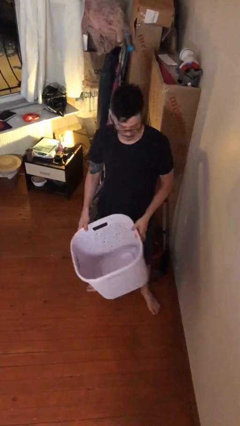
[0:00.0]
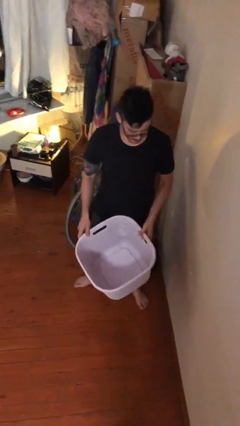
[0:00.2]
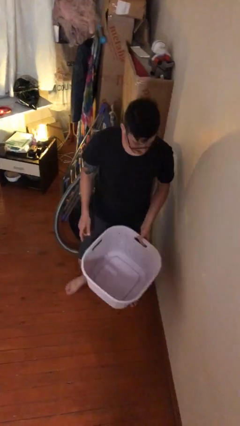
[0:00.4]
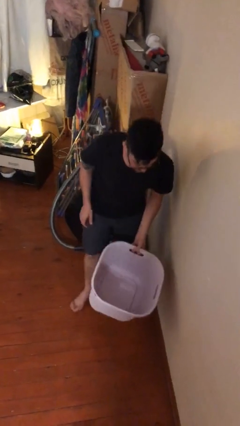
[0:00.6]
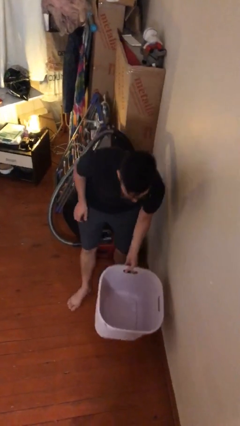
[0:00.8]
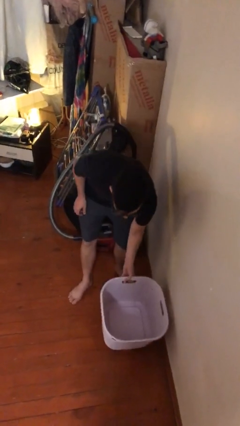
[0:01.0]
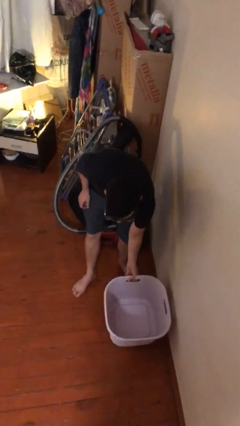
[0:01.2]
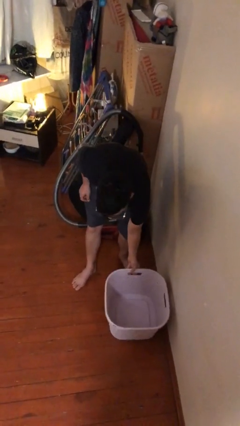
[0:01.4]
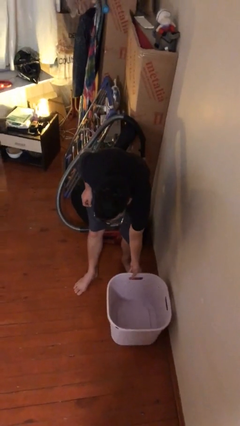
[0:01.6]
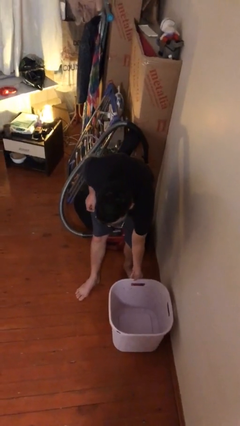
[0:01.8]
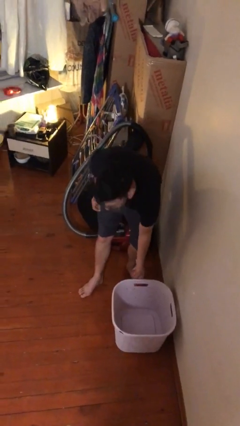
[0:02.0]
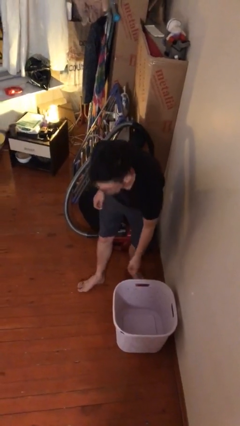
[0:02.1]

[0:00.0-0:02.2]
person puts down object on floor

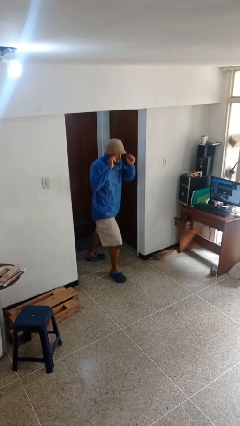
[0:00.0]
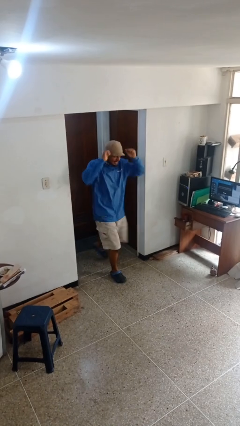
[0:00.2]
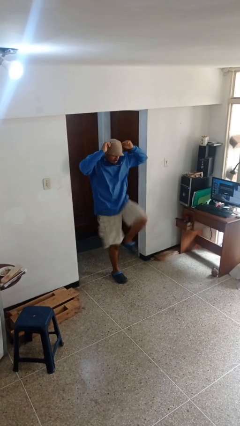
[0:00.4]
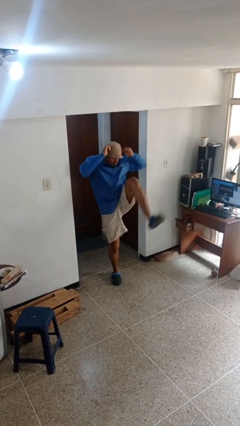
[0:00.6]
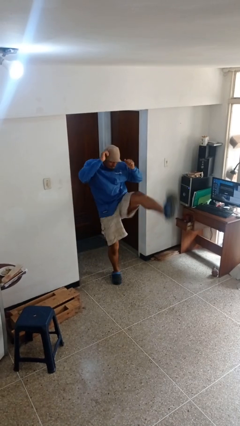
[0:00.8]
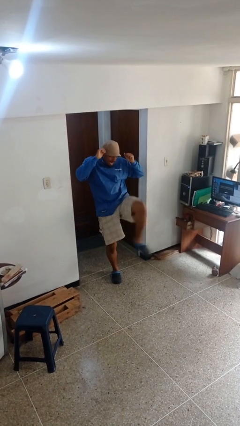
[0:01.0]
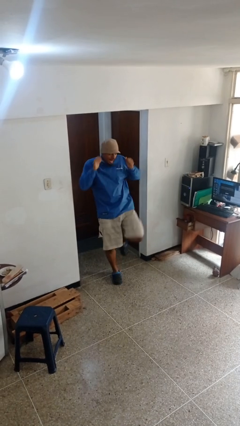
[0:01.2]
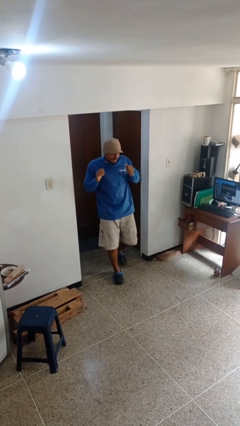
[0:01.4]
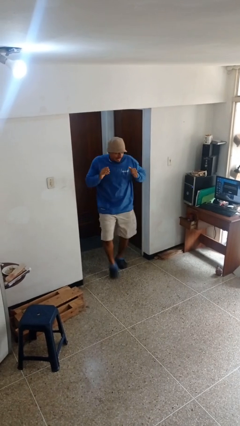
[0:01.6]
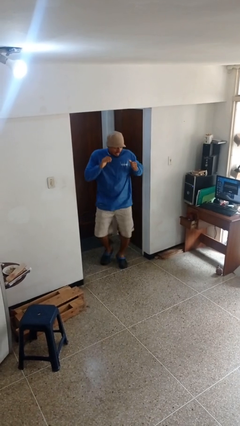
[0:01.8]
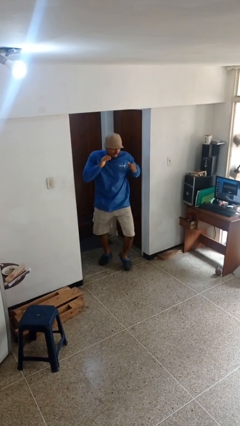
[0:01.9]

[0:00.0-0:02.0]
person karate kicks

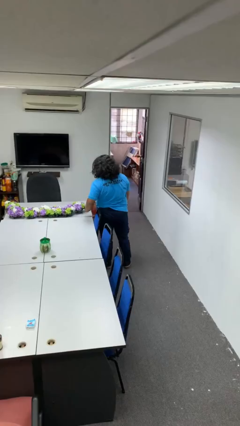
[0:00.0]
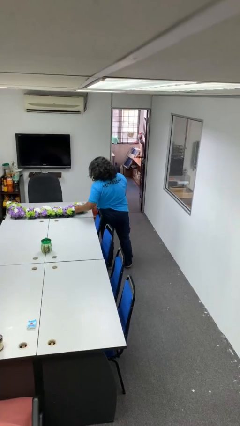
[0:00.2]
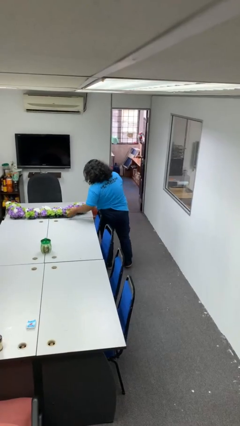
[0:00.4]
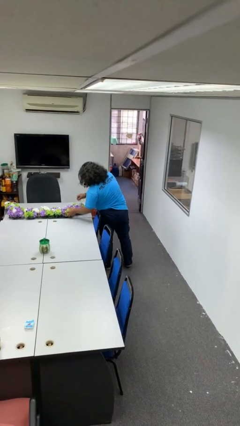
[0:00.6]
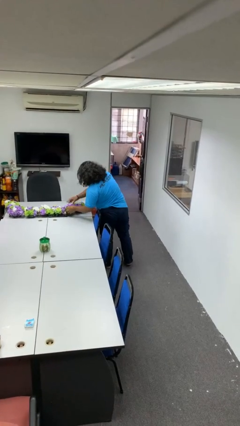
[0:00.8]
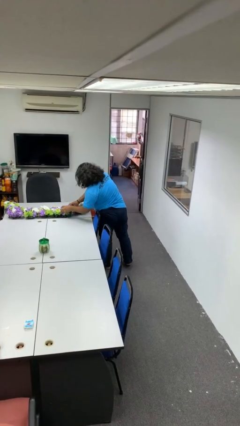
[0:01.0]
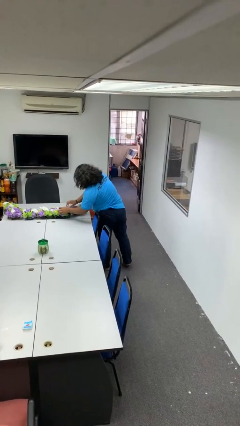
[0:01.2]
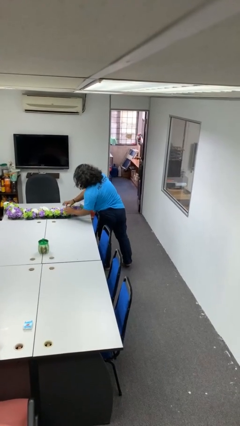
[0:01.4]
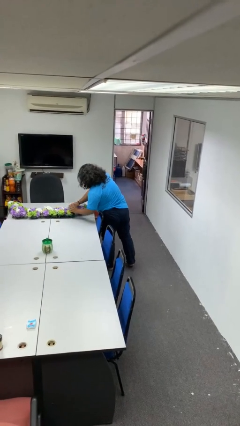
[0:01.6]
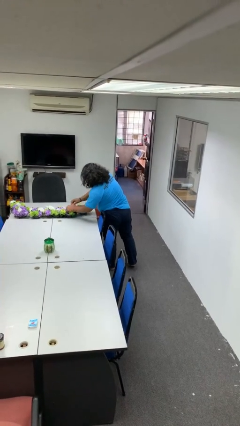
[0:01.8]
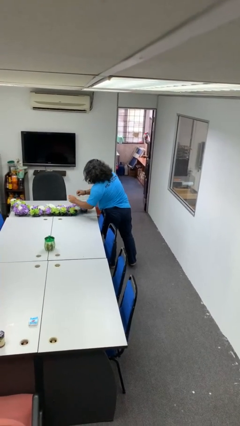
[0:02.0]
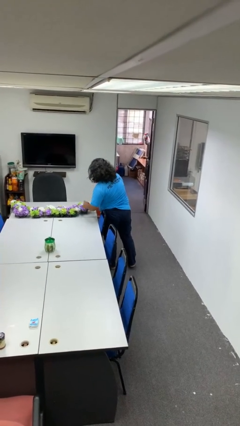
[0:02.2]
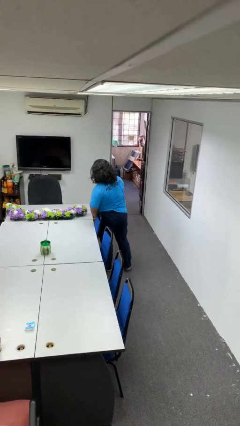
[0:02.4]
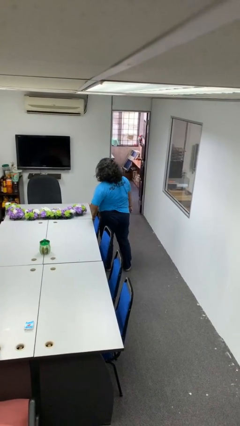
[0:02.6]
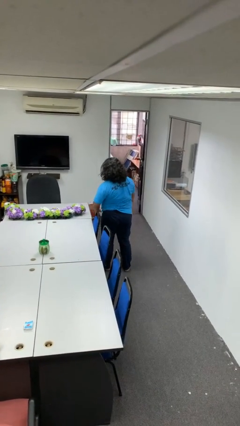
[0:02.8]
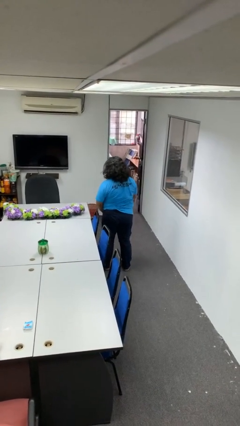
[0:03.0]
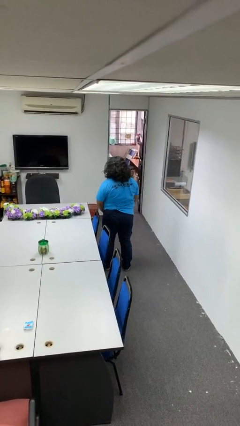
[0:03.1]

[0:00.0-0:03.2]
person arranges flowers in vase

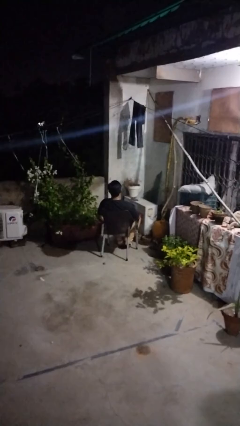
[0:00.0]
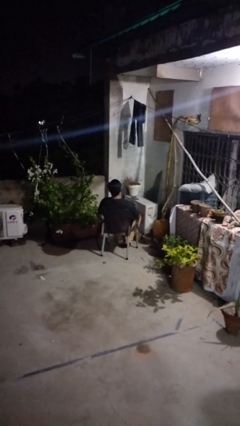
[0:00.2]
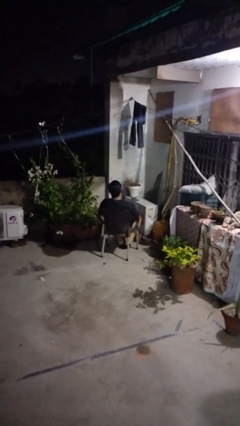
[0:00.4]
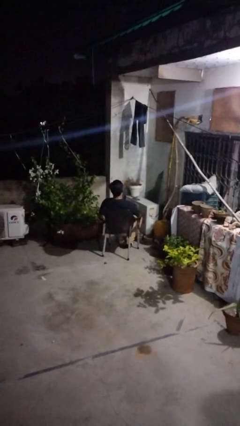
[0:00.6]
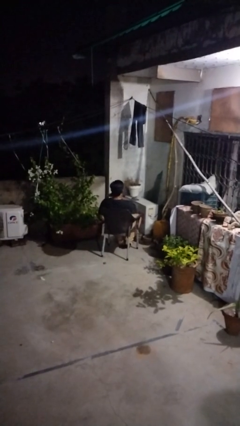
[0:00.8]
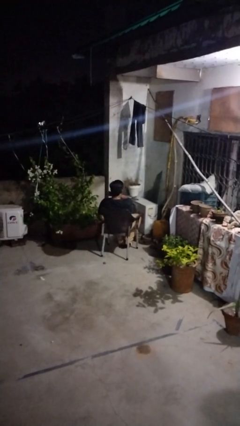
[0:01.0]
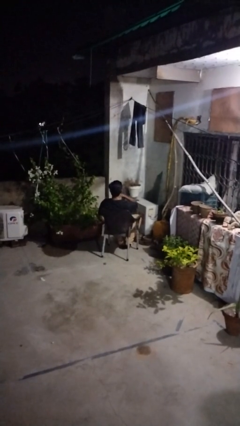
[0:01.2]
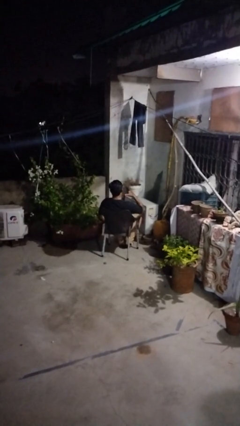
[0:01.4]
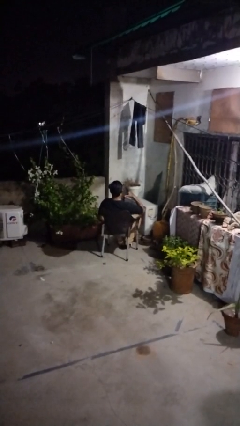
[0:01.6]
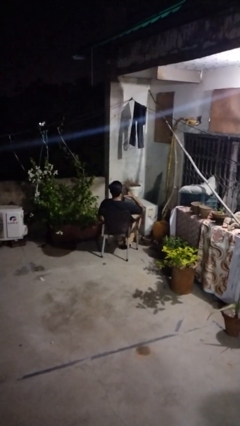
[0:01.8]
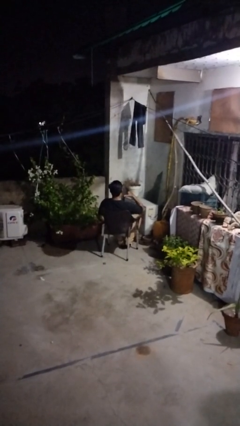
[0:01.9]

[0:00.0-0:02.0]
person gestures cut

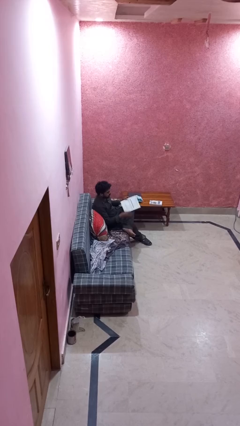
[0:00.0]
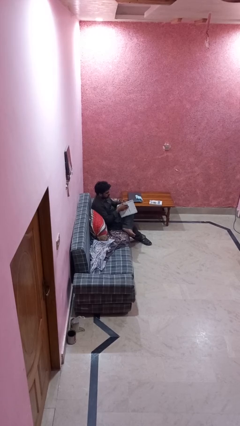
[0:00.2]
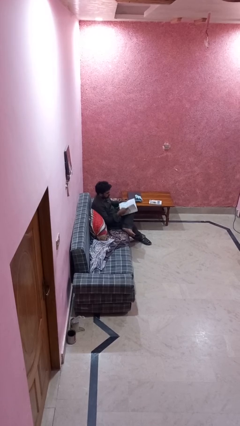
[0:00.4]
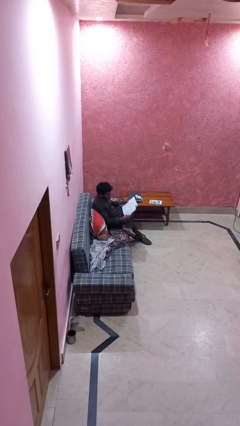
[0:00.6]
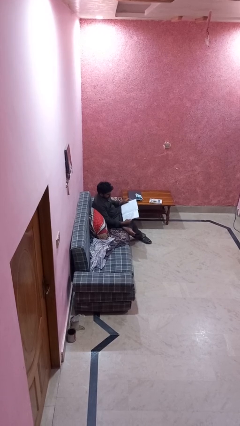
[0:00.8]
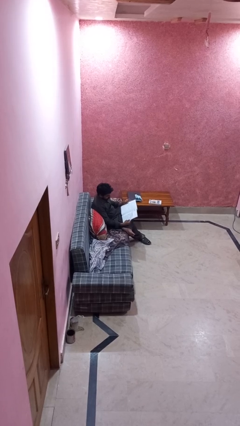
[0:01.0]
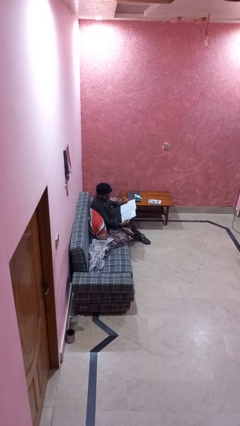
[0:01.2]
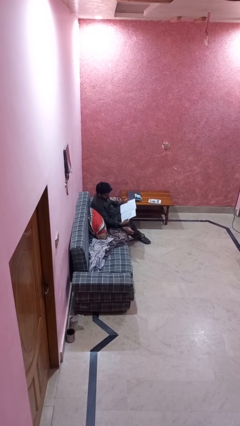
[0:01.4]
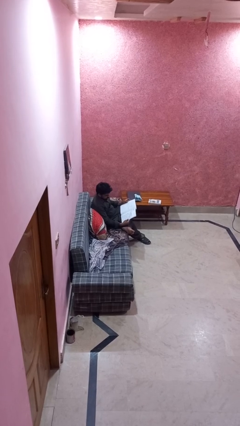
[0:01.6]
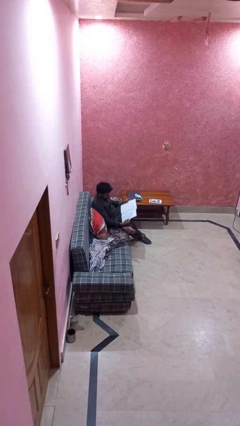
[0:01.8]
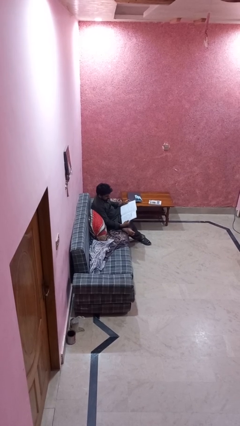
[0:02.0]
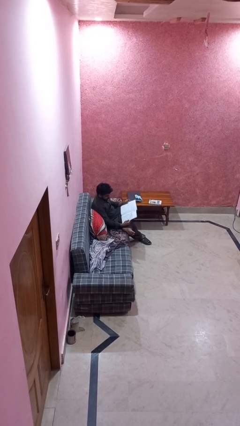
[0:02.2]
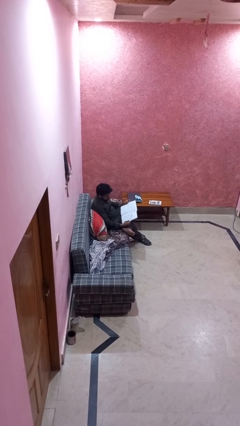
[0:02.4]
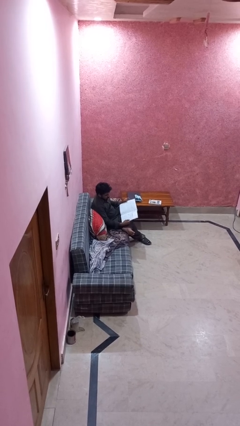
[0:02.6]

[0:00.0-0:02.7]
person reads magazine

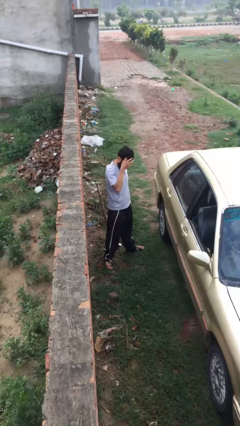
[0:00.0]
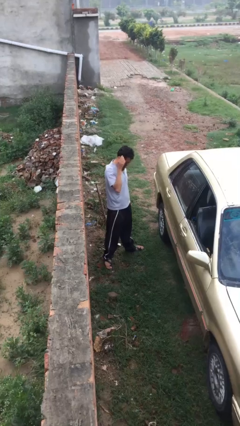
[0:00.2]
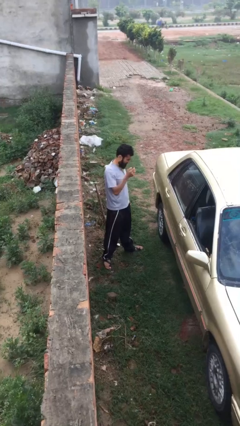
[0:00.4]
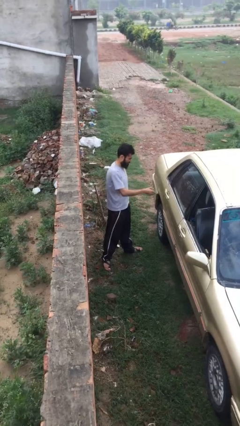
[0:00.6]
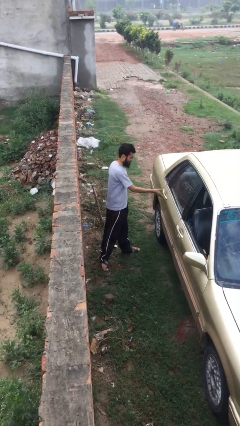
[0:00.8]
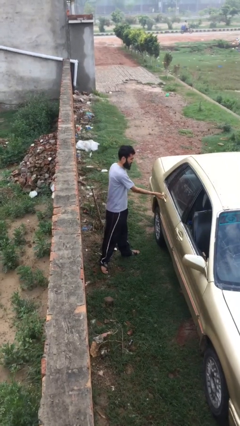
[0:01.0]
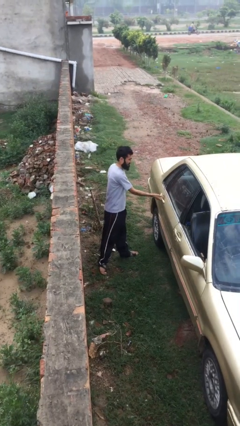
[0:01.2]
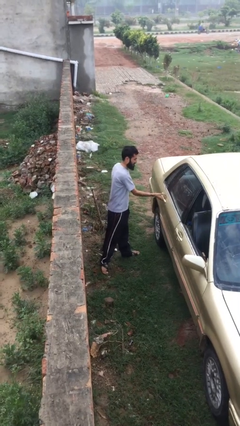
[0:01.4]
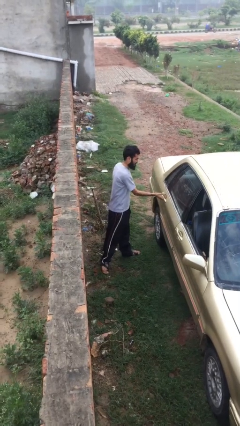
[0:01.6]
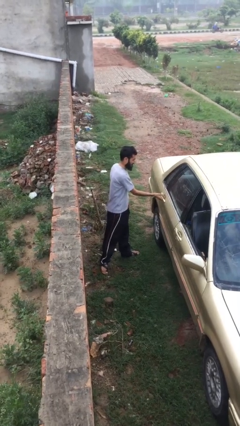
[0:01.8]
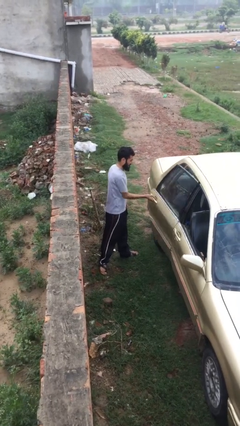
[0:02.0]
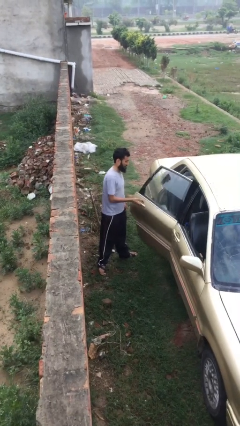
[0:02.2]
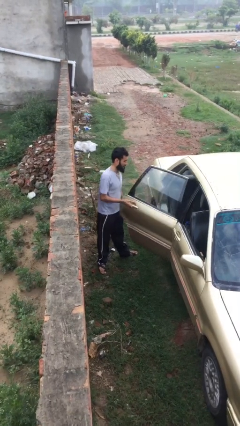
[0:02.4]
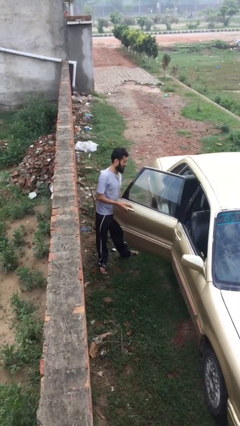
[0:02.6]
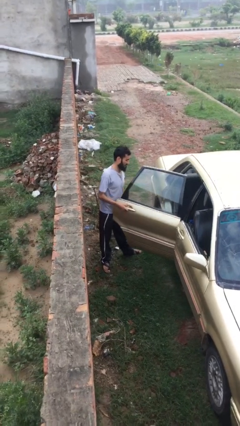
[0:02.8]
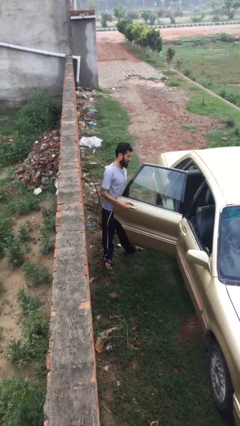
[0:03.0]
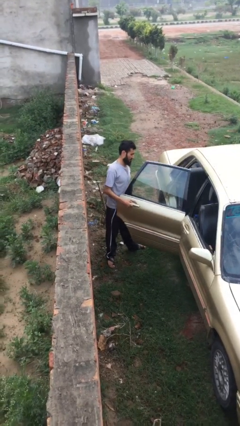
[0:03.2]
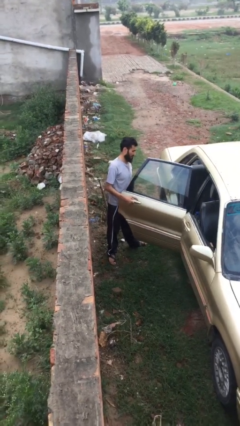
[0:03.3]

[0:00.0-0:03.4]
person opens car door

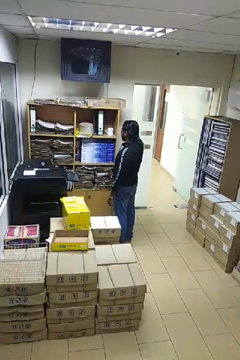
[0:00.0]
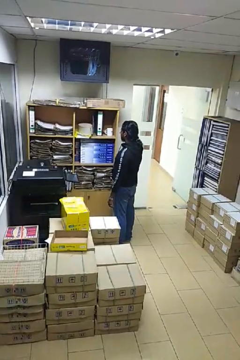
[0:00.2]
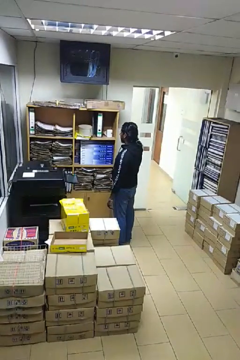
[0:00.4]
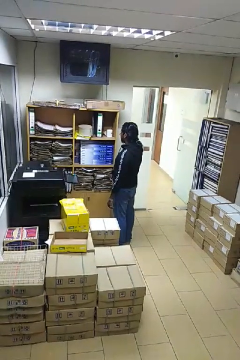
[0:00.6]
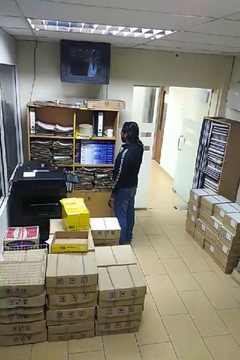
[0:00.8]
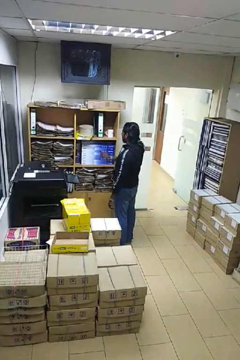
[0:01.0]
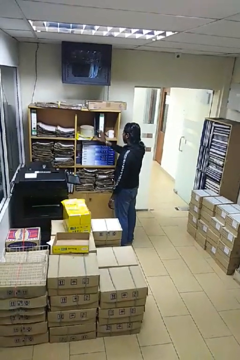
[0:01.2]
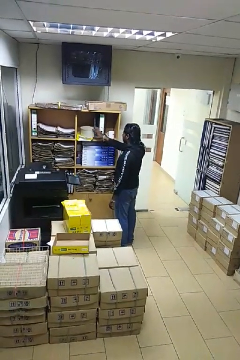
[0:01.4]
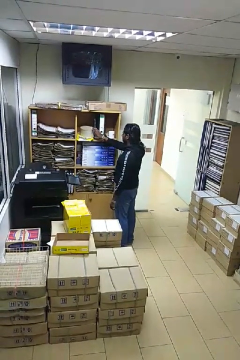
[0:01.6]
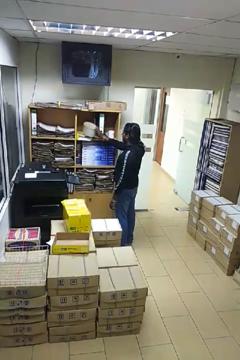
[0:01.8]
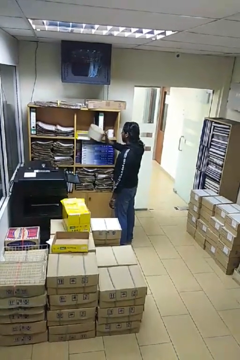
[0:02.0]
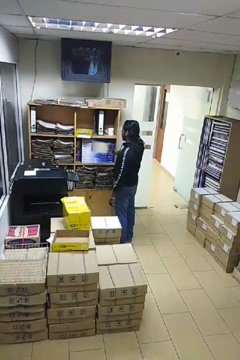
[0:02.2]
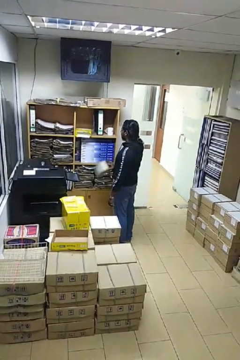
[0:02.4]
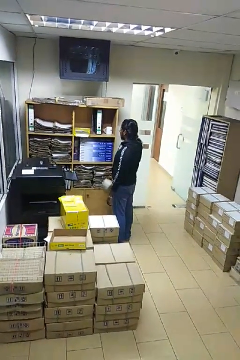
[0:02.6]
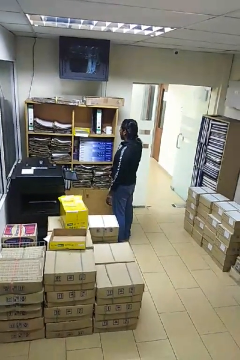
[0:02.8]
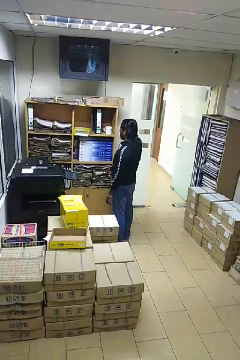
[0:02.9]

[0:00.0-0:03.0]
person picks up object from cabinet
